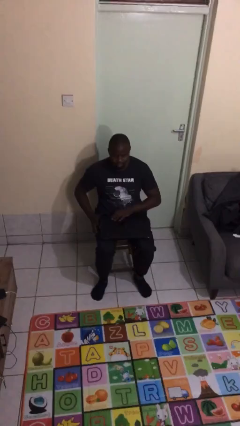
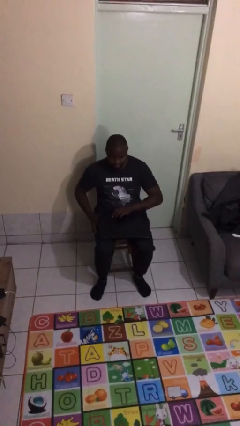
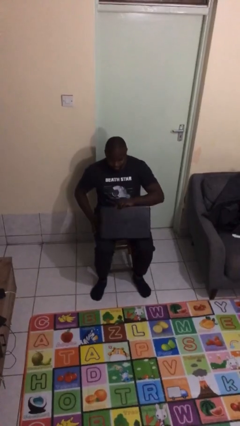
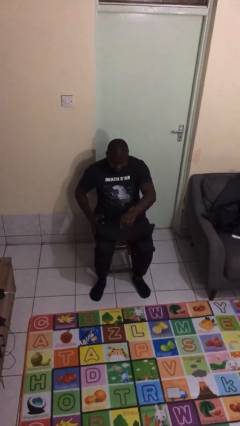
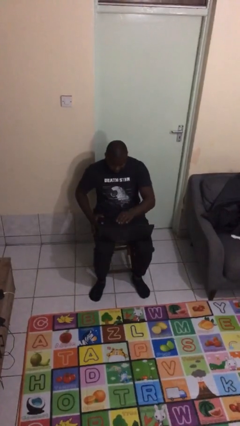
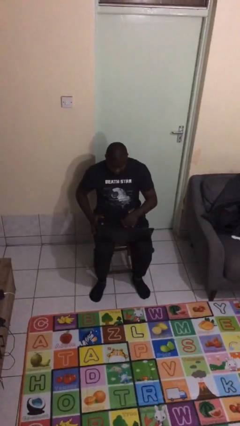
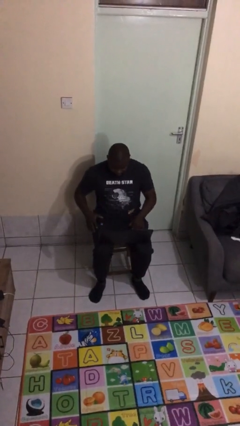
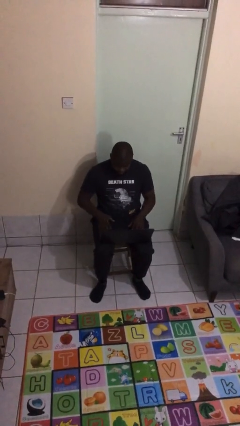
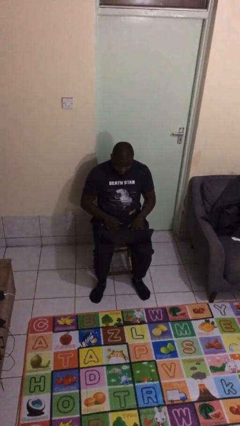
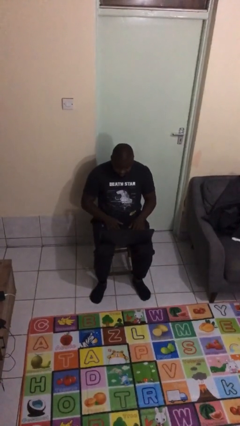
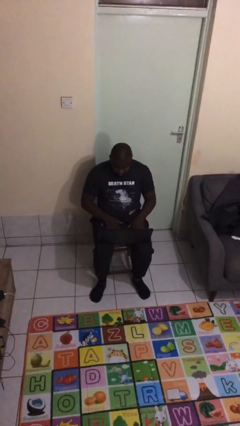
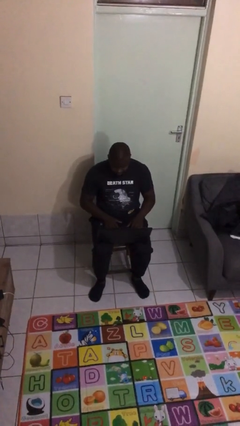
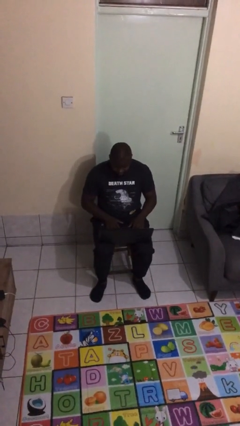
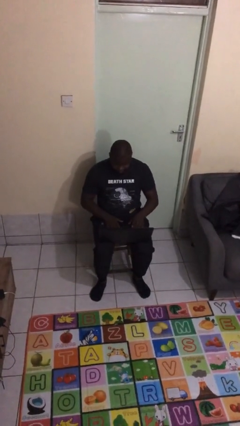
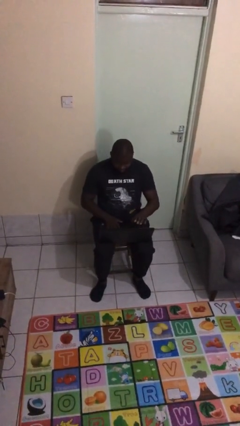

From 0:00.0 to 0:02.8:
person opens laptop

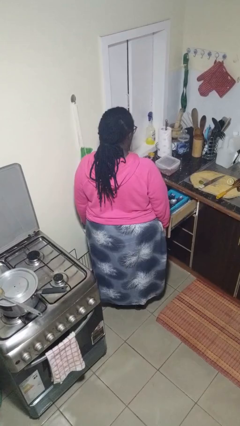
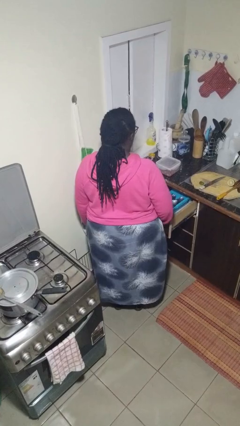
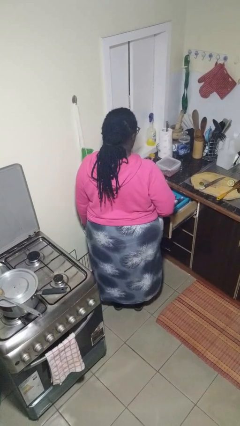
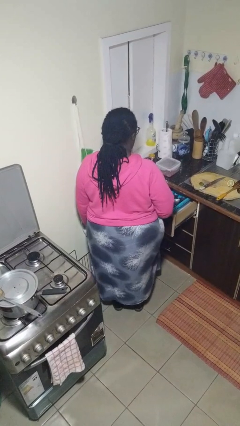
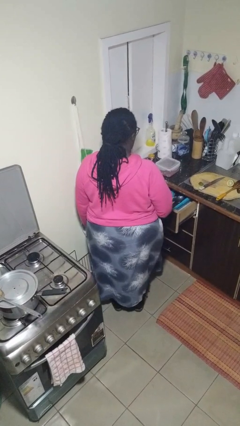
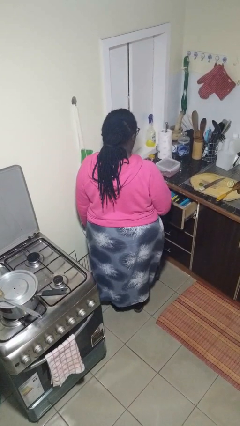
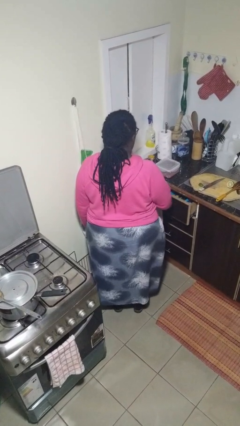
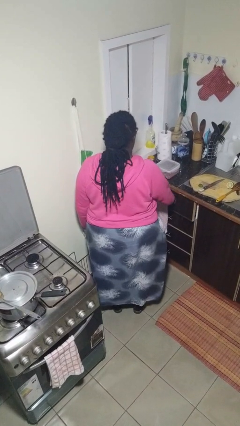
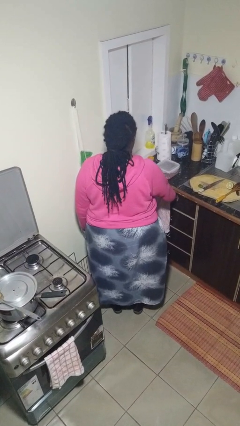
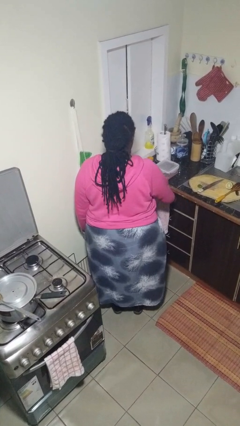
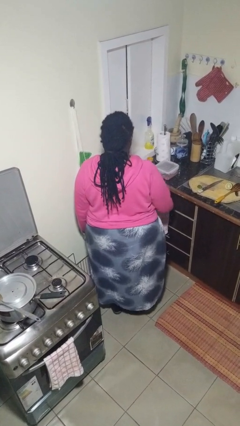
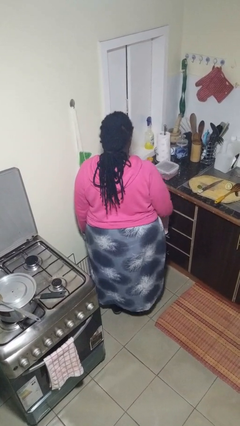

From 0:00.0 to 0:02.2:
person closes kitchen drawer

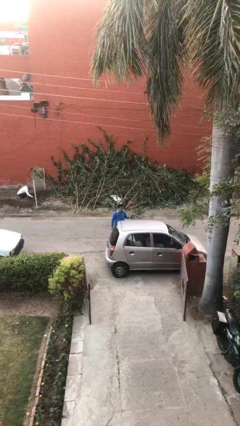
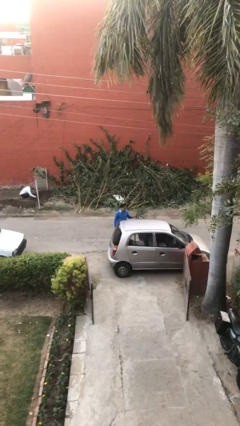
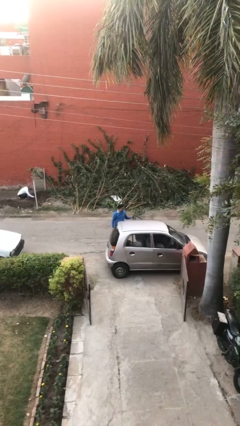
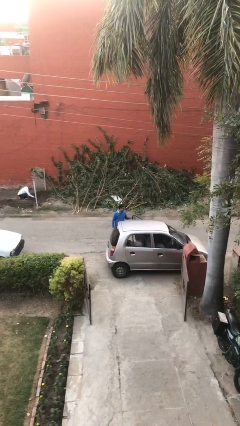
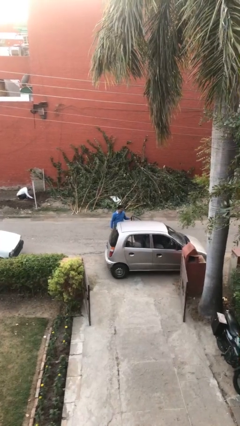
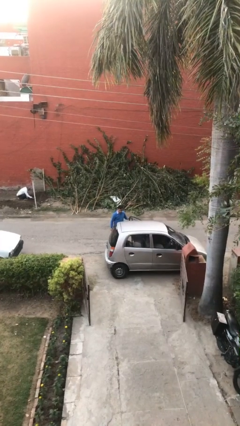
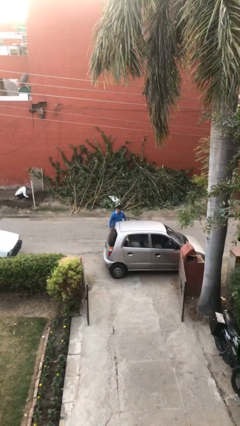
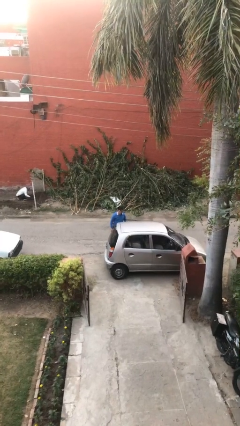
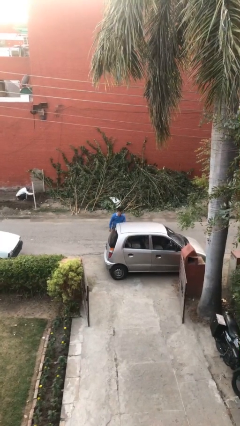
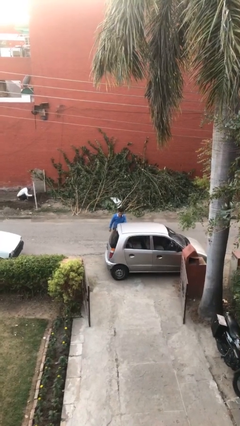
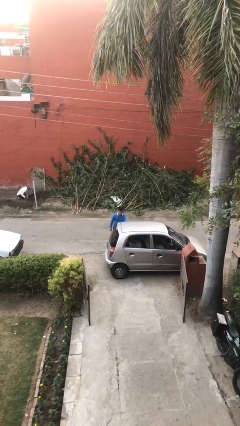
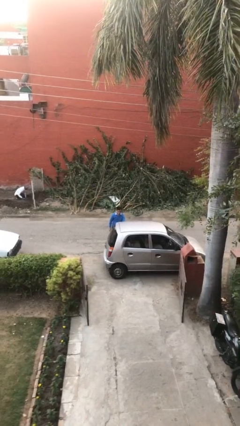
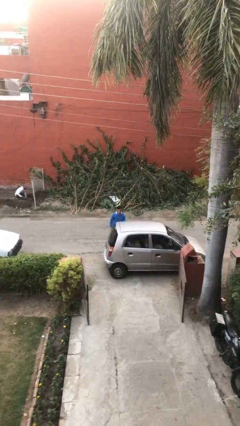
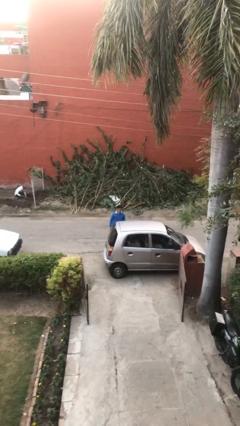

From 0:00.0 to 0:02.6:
person closes car door

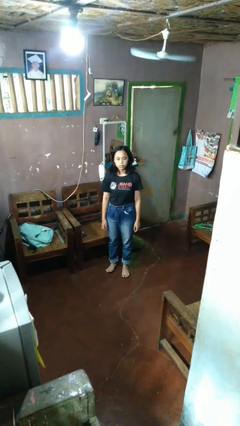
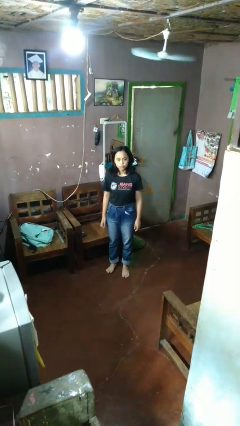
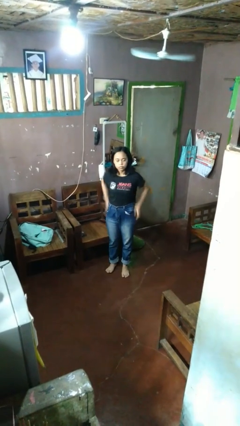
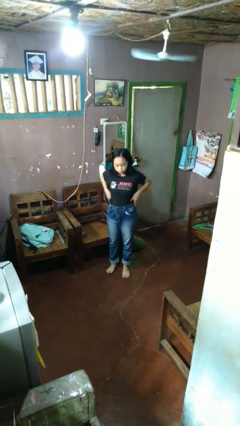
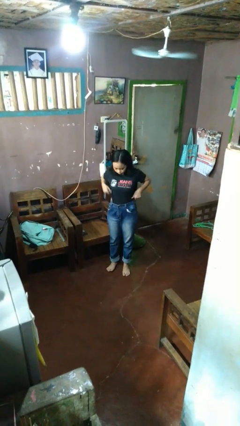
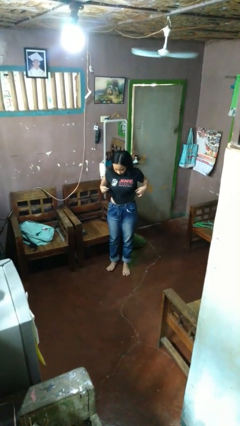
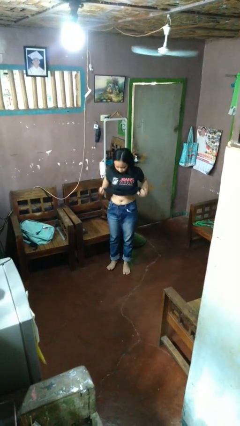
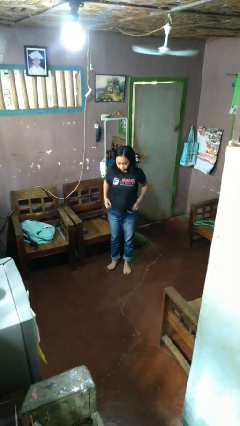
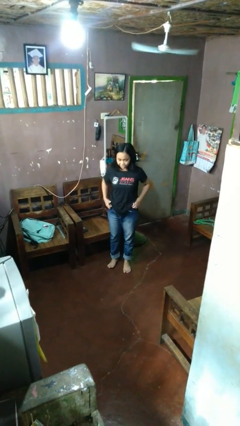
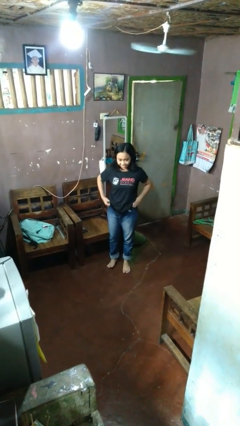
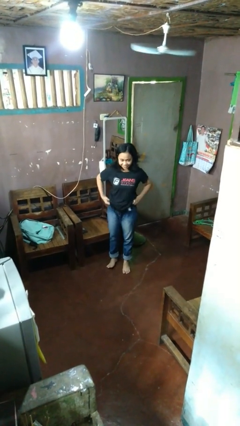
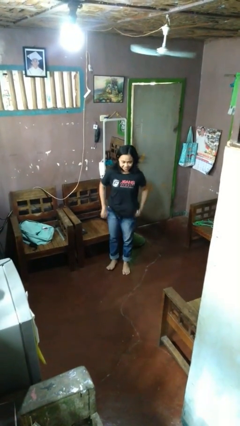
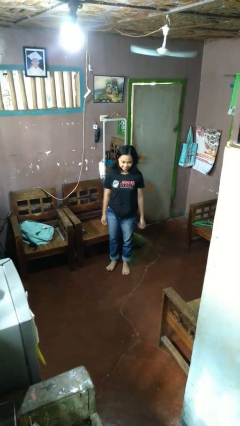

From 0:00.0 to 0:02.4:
person untucks shirt

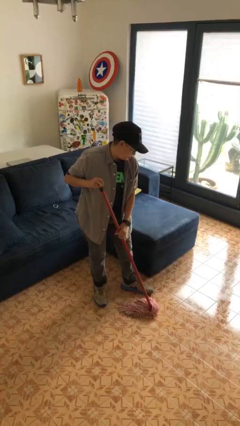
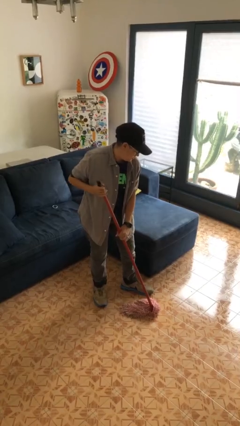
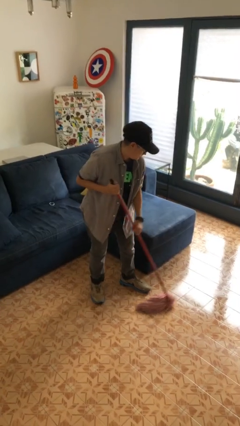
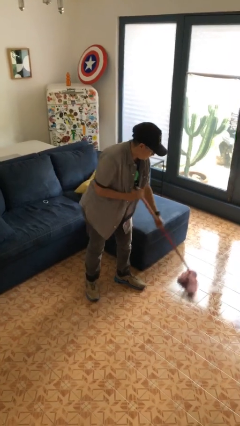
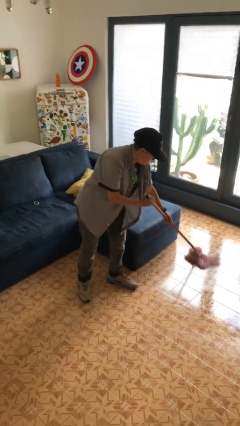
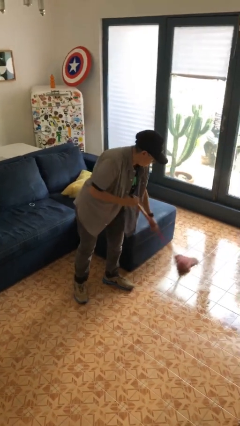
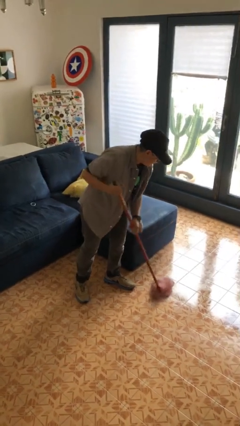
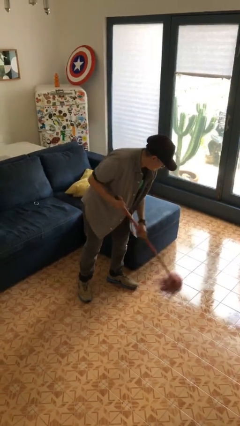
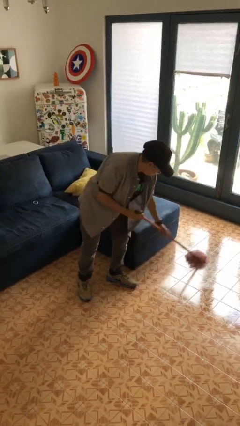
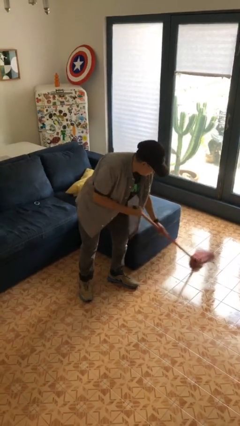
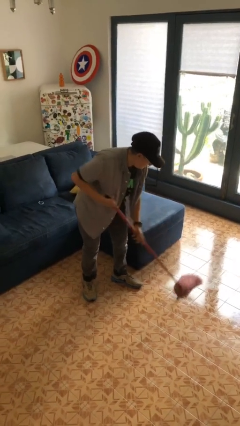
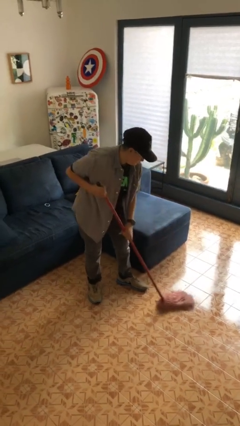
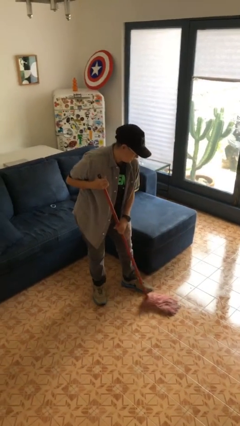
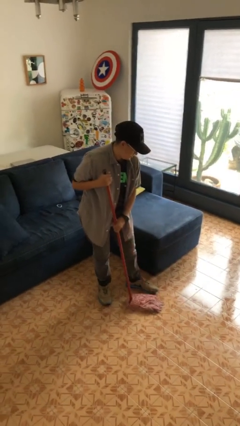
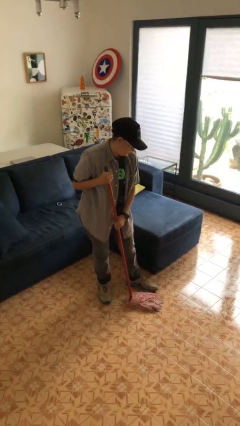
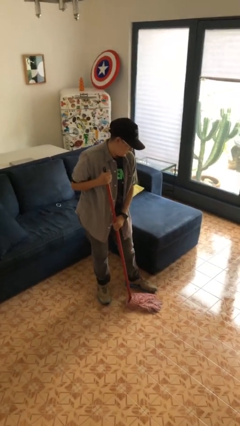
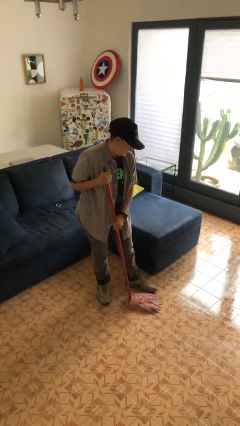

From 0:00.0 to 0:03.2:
person mops

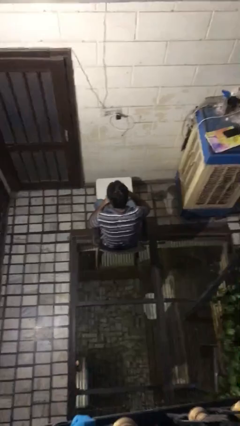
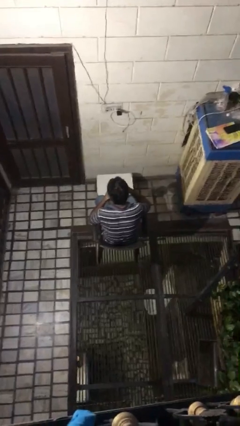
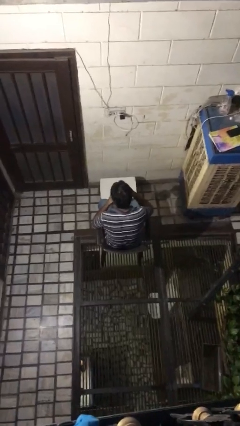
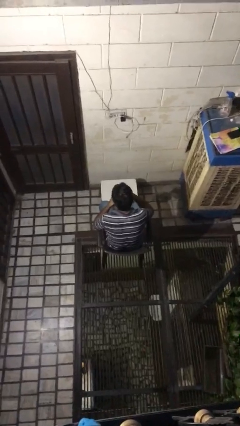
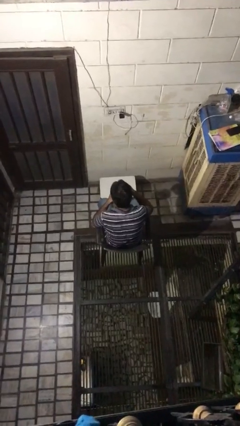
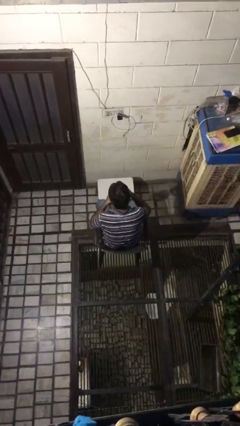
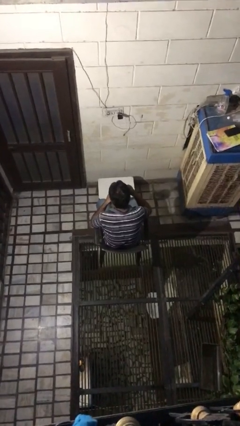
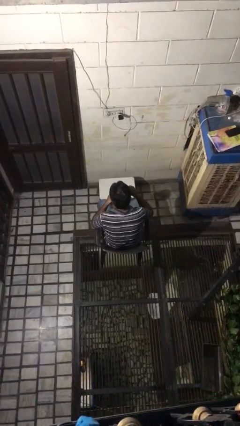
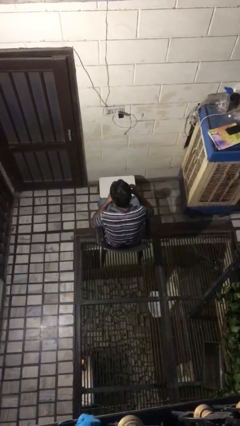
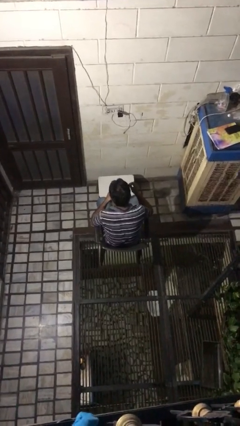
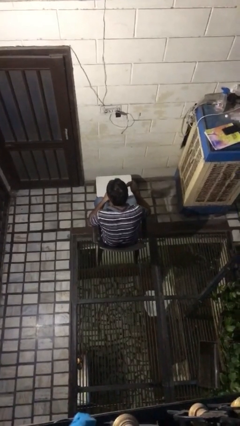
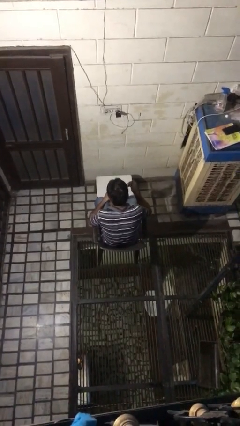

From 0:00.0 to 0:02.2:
person stirs mug

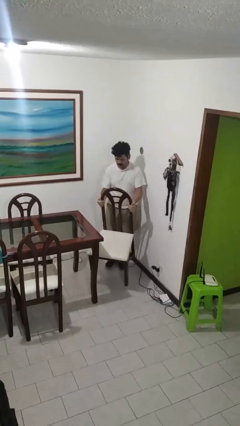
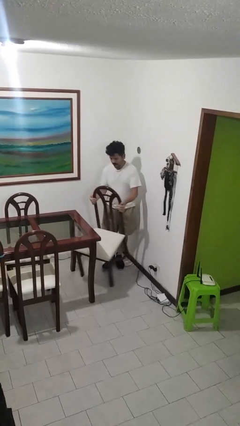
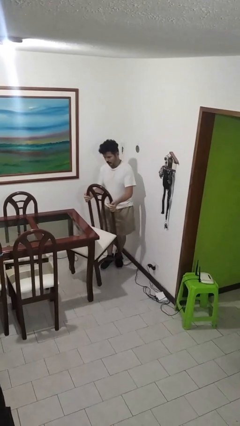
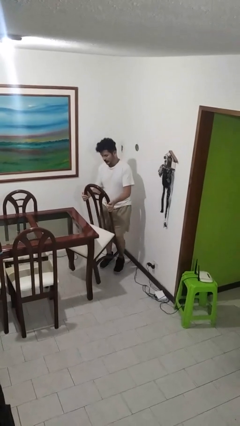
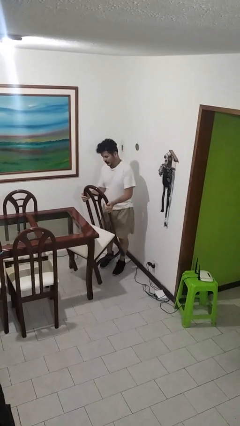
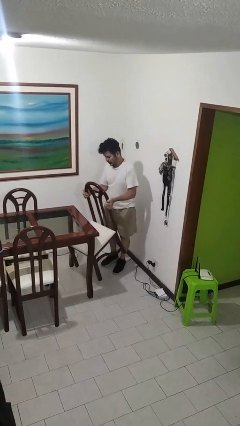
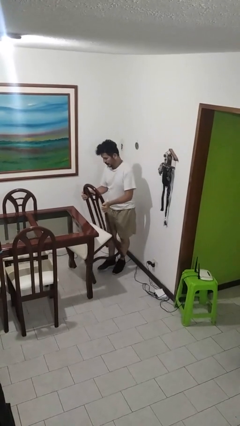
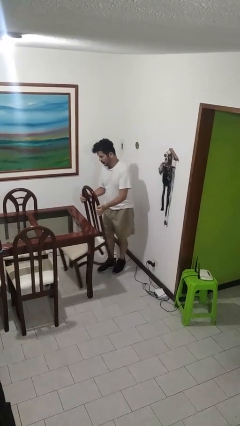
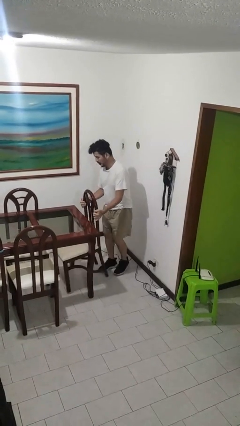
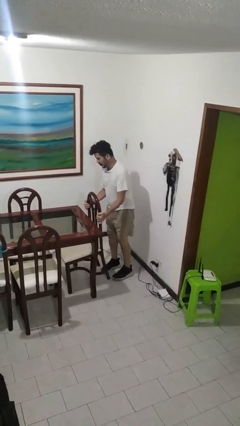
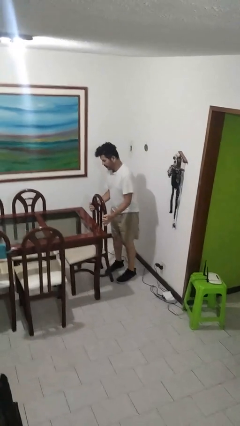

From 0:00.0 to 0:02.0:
person pushes in chair
